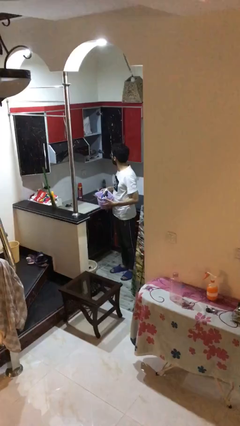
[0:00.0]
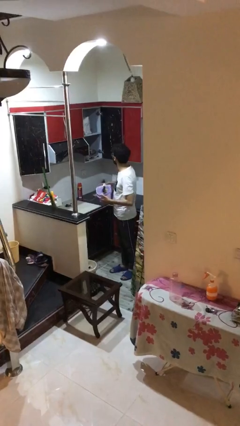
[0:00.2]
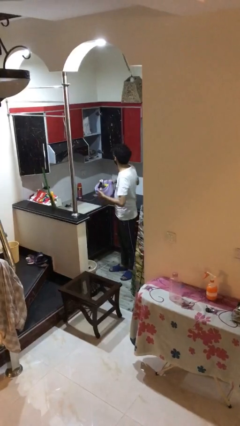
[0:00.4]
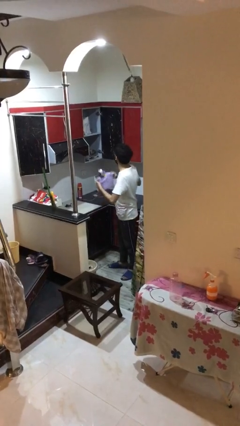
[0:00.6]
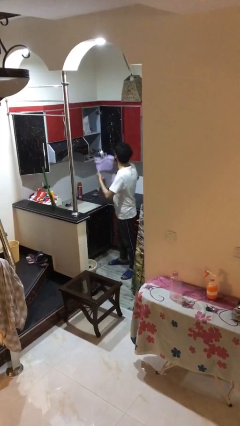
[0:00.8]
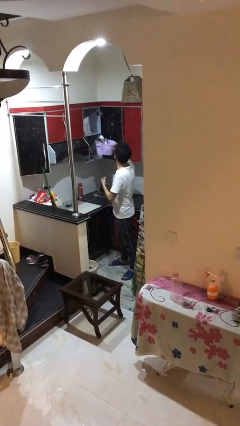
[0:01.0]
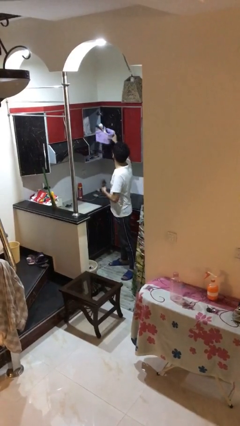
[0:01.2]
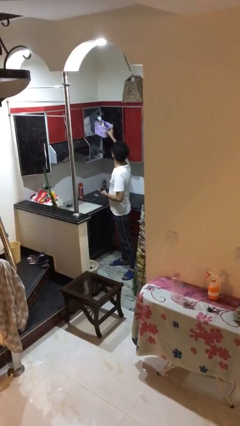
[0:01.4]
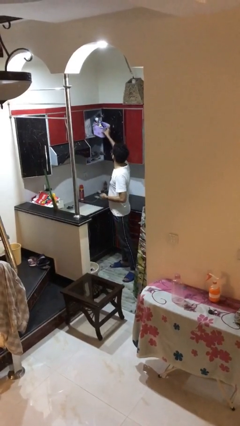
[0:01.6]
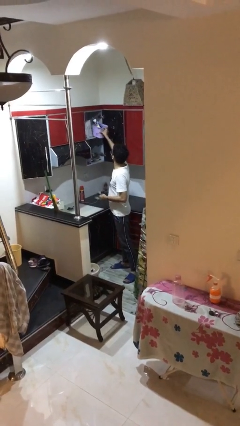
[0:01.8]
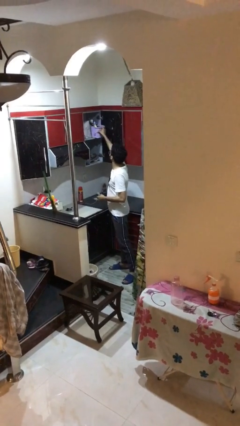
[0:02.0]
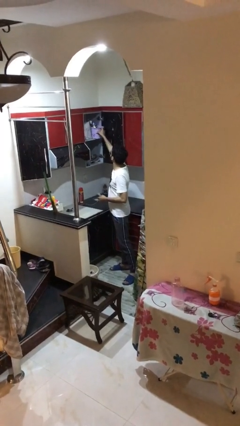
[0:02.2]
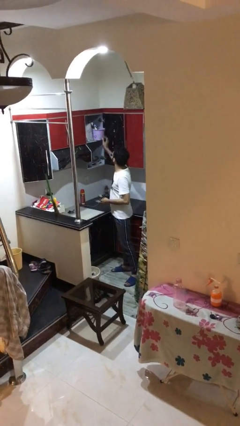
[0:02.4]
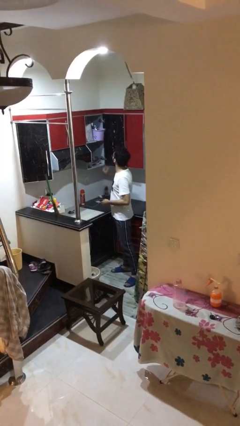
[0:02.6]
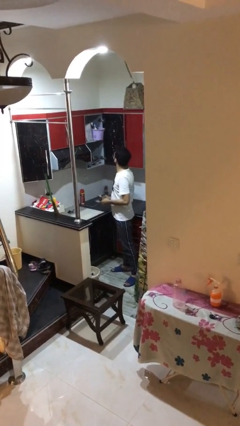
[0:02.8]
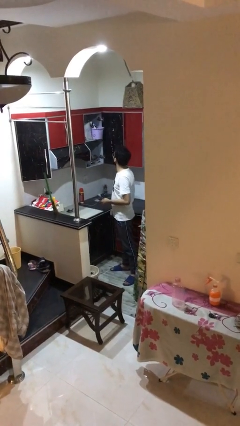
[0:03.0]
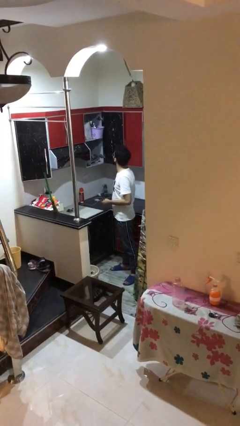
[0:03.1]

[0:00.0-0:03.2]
person puts down object on shelf

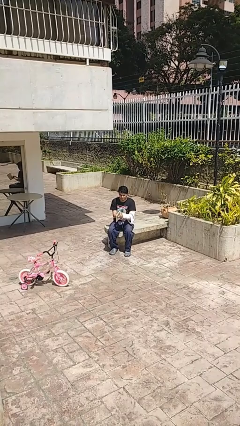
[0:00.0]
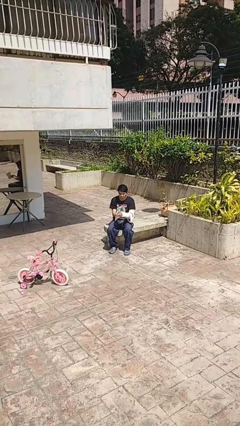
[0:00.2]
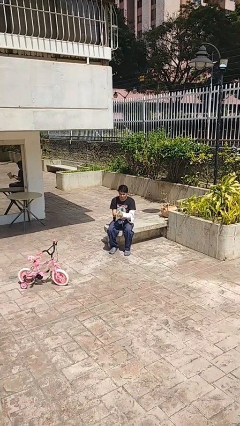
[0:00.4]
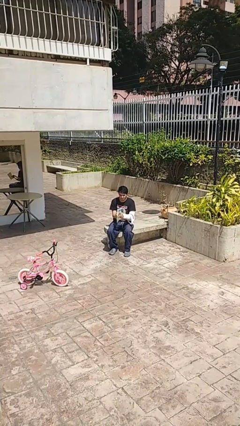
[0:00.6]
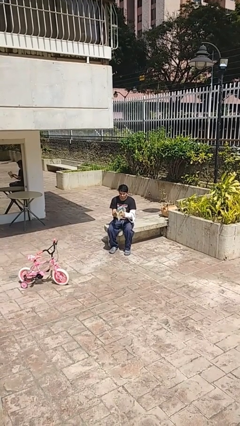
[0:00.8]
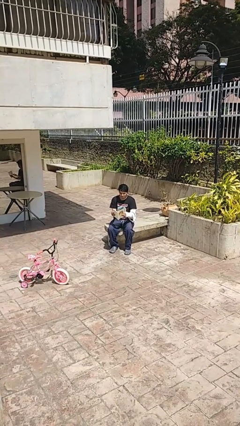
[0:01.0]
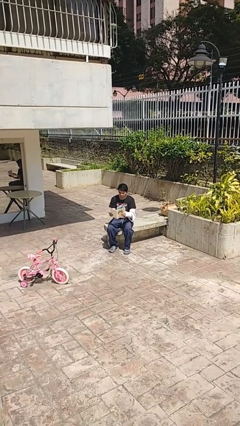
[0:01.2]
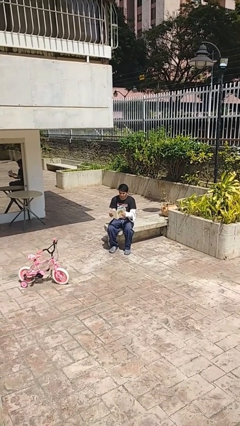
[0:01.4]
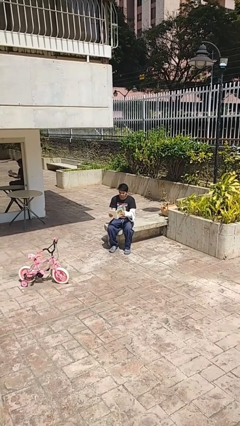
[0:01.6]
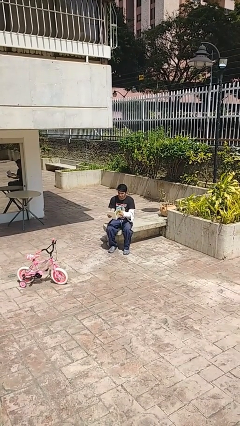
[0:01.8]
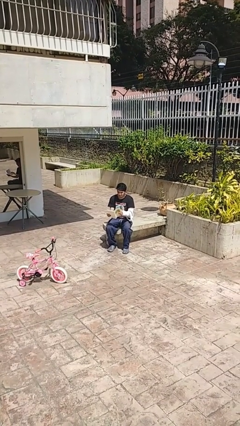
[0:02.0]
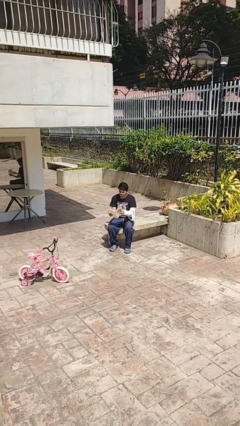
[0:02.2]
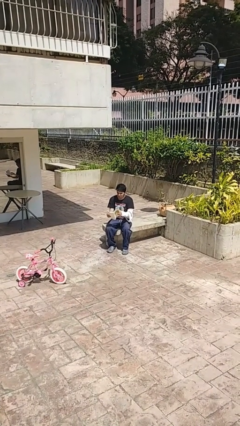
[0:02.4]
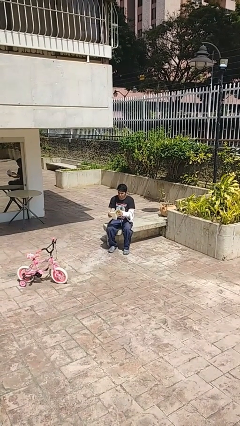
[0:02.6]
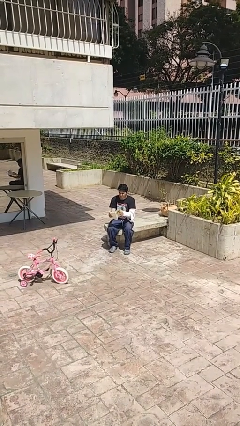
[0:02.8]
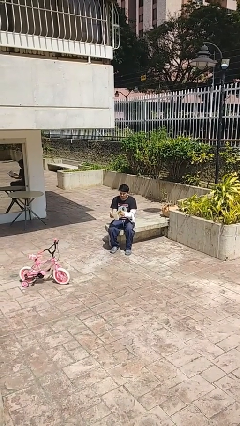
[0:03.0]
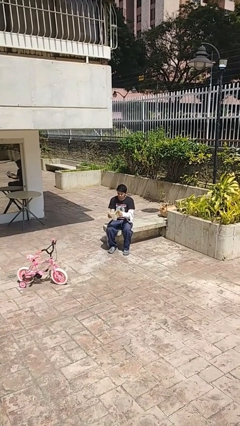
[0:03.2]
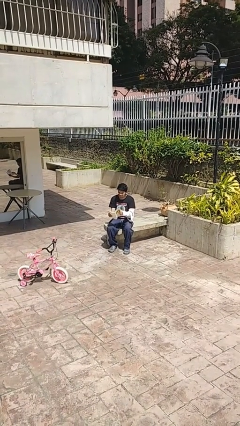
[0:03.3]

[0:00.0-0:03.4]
person reads document

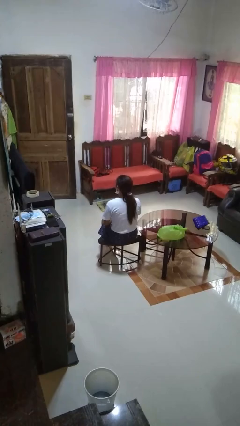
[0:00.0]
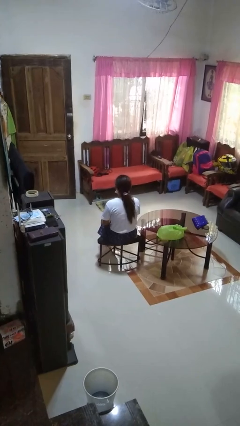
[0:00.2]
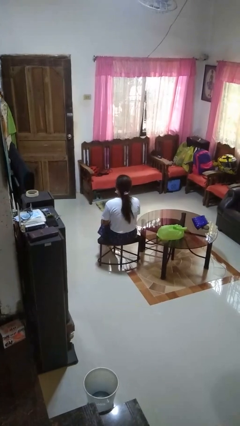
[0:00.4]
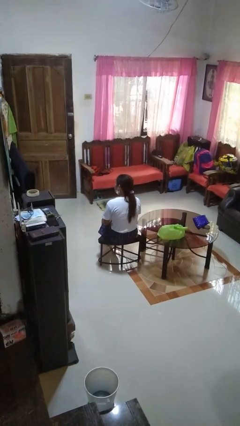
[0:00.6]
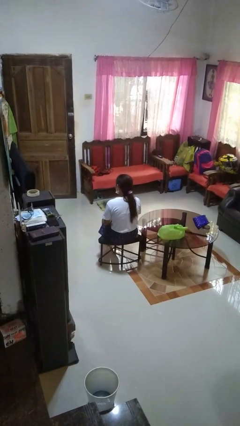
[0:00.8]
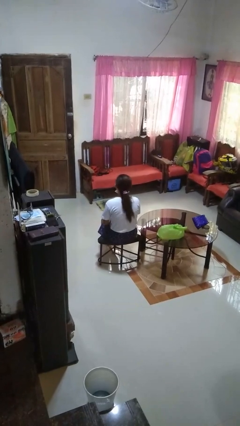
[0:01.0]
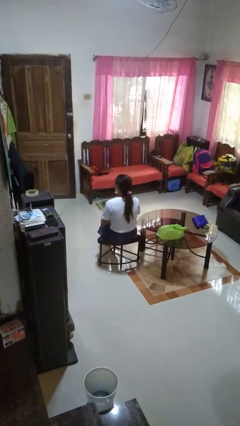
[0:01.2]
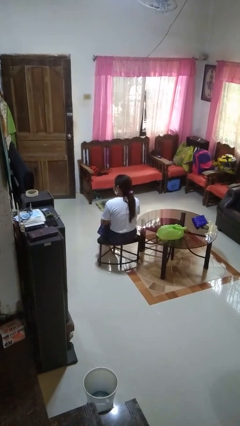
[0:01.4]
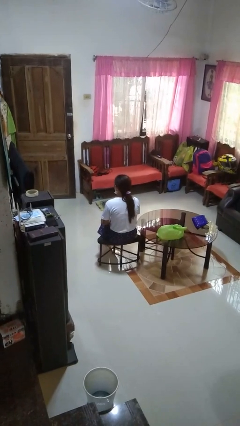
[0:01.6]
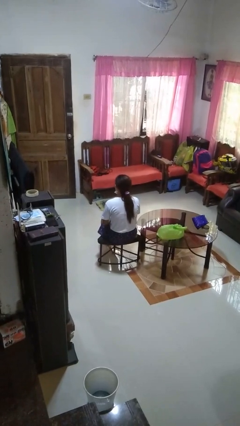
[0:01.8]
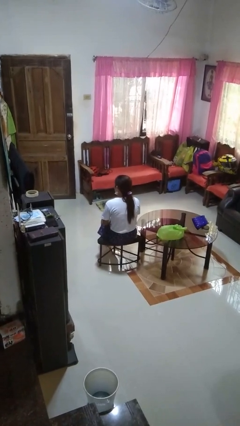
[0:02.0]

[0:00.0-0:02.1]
person shakes head

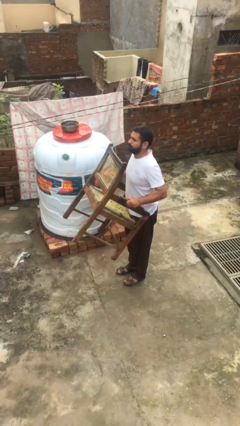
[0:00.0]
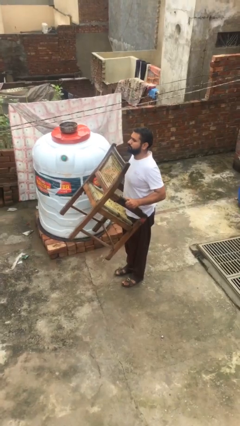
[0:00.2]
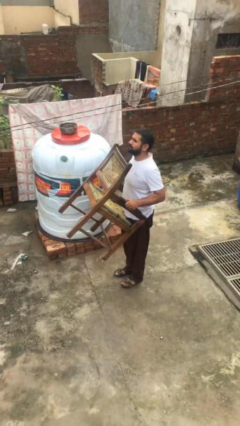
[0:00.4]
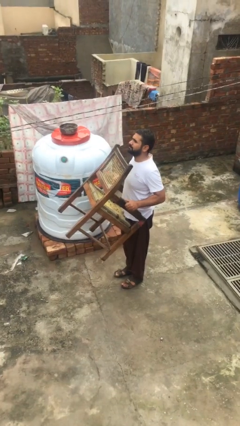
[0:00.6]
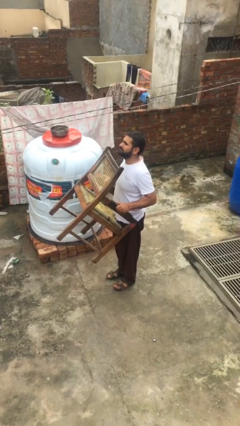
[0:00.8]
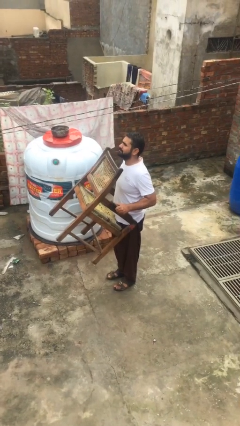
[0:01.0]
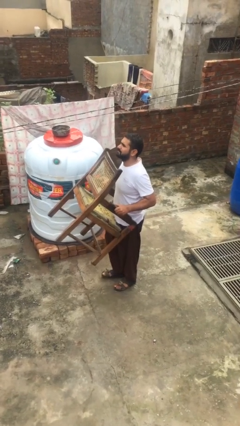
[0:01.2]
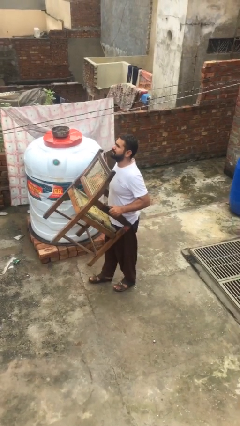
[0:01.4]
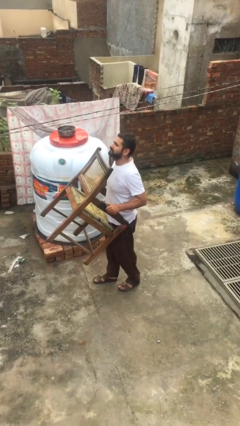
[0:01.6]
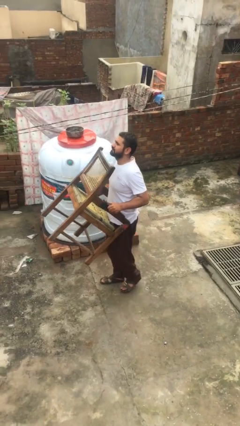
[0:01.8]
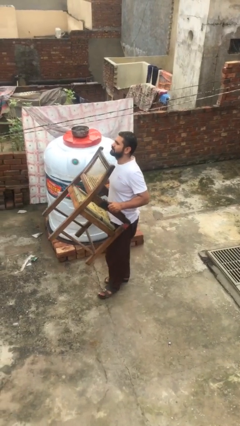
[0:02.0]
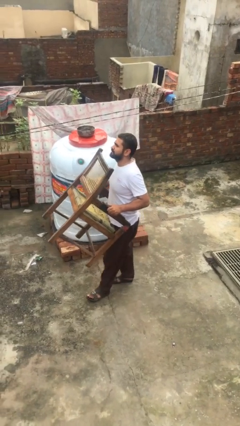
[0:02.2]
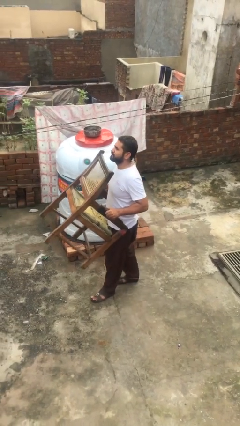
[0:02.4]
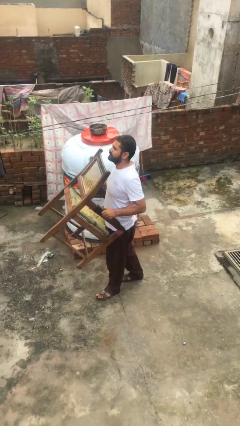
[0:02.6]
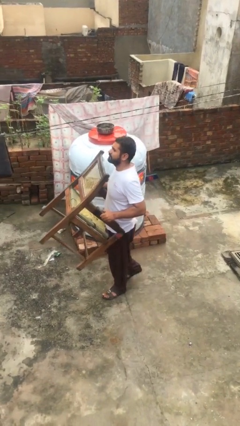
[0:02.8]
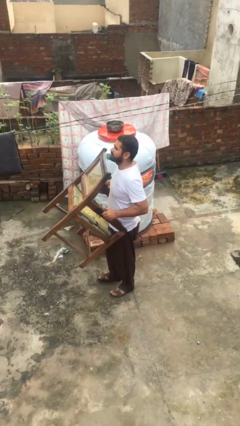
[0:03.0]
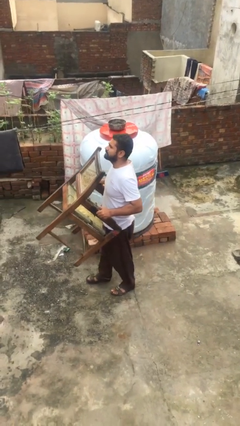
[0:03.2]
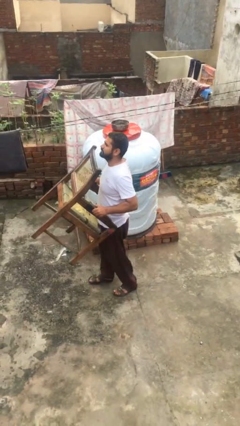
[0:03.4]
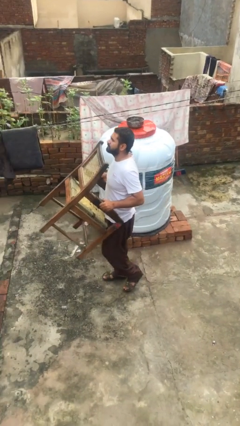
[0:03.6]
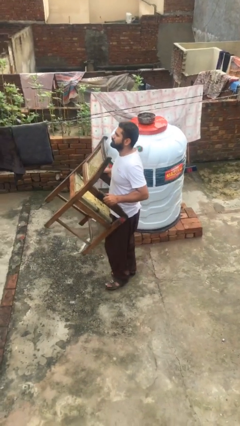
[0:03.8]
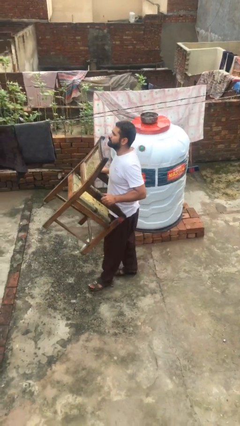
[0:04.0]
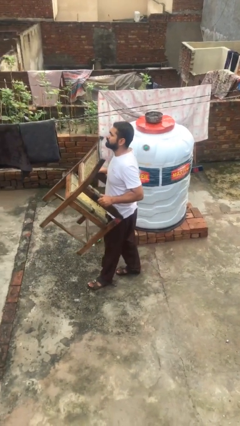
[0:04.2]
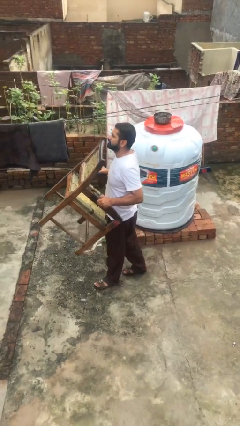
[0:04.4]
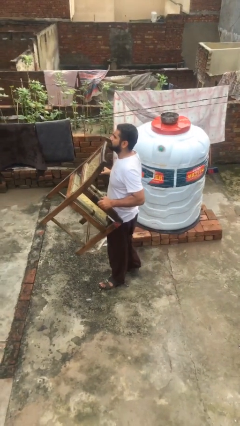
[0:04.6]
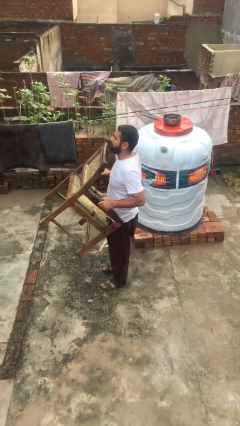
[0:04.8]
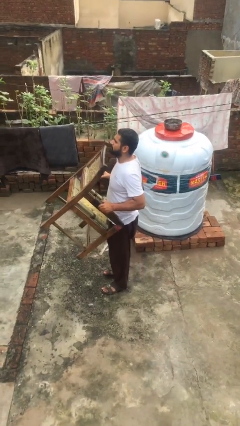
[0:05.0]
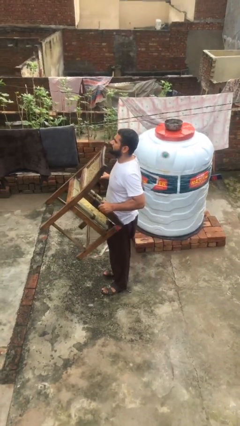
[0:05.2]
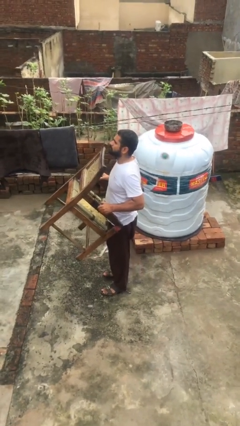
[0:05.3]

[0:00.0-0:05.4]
person carries heavy object

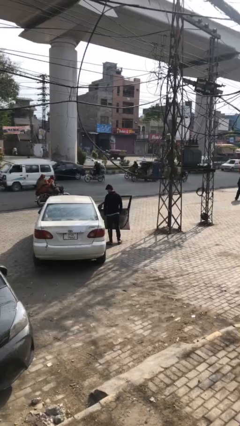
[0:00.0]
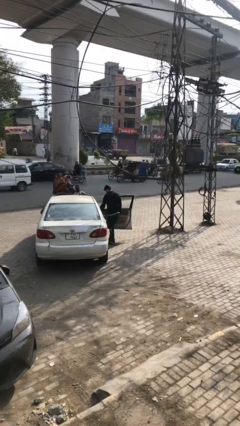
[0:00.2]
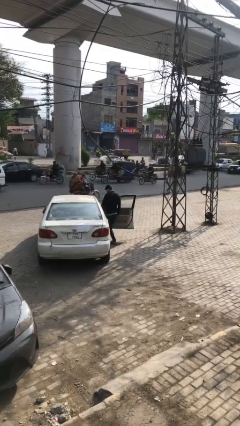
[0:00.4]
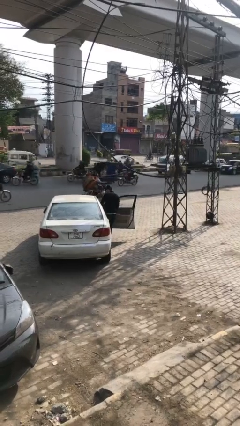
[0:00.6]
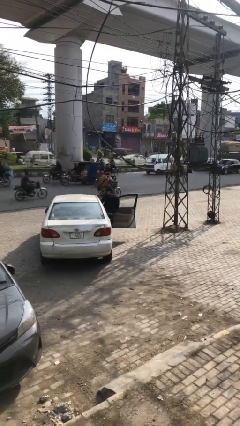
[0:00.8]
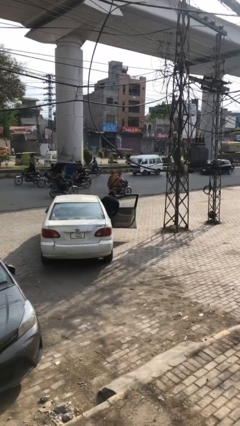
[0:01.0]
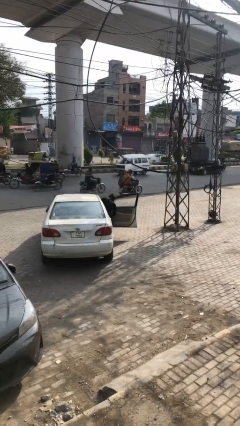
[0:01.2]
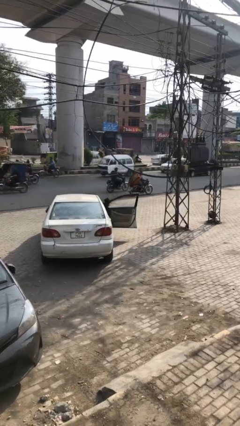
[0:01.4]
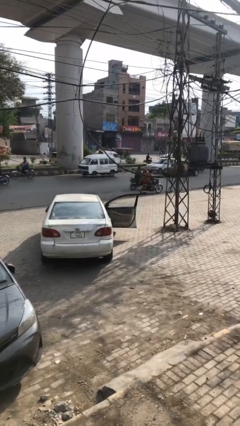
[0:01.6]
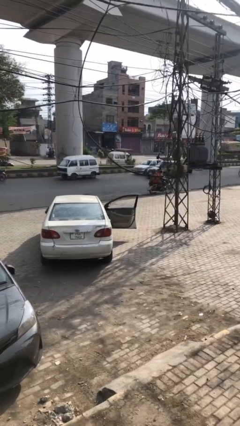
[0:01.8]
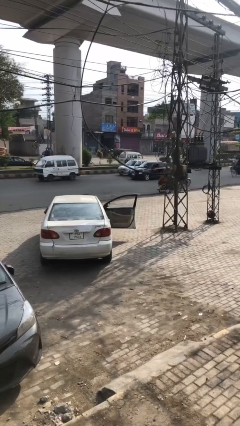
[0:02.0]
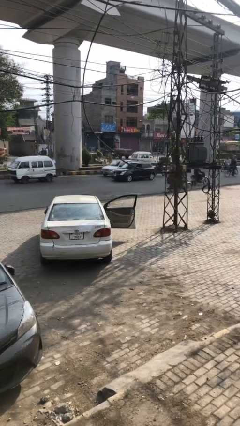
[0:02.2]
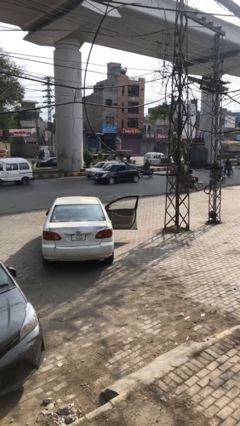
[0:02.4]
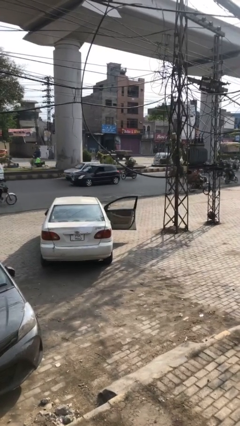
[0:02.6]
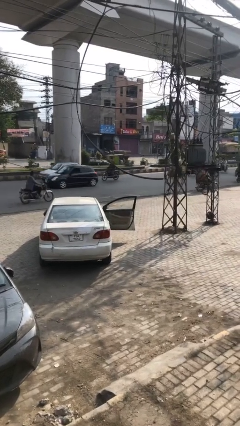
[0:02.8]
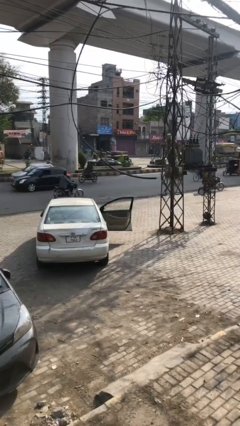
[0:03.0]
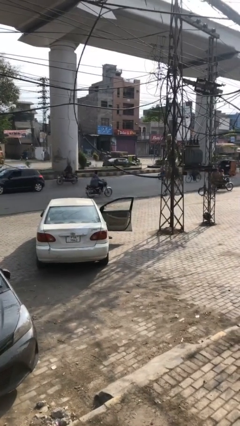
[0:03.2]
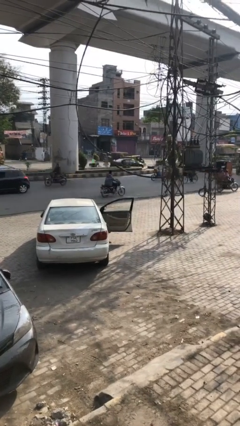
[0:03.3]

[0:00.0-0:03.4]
person enters car

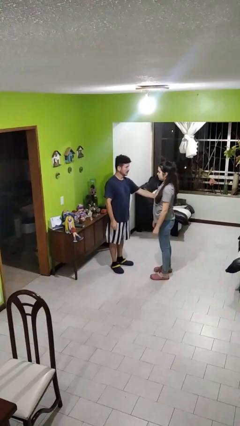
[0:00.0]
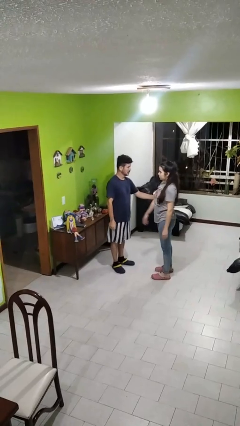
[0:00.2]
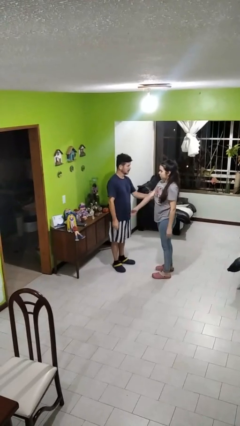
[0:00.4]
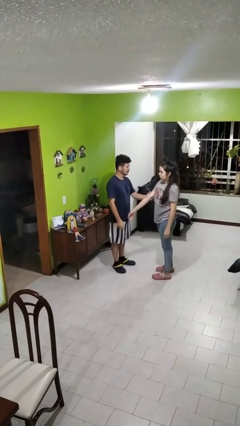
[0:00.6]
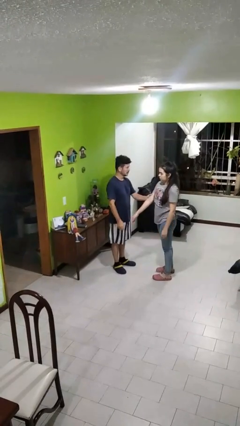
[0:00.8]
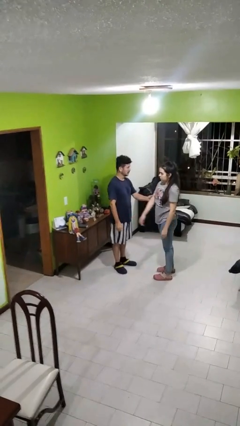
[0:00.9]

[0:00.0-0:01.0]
person grabs person by bicep
